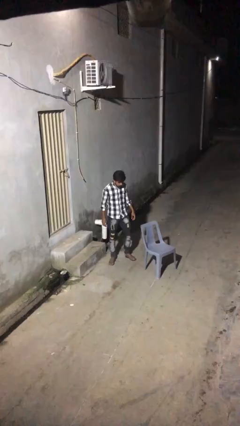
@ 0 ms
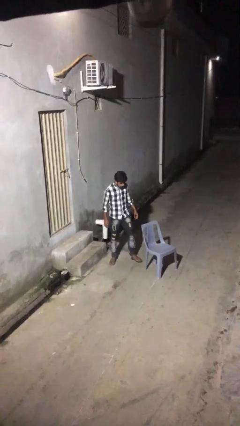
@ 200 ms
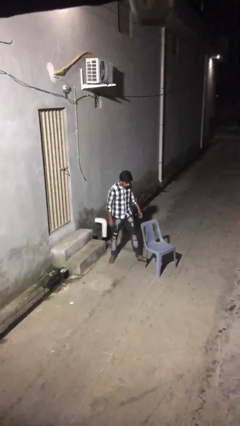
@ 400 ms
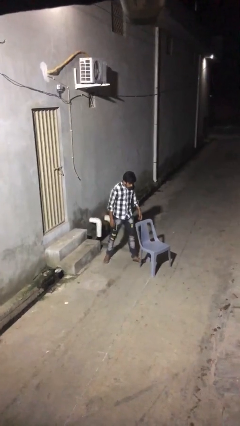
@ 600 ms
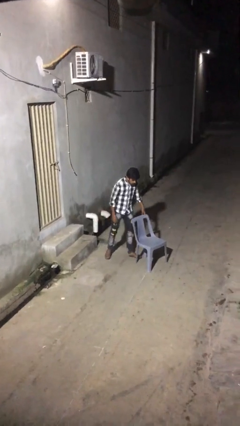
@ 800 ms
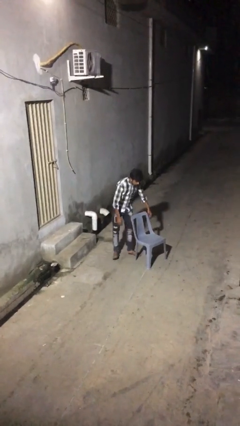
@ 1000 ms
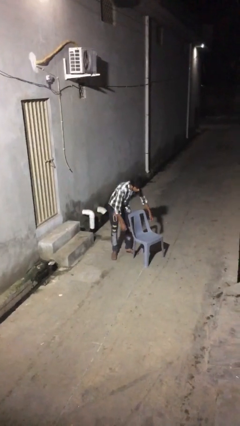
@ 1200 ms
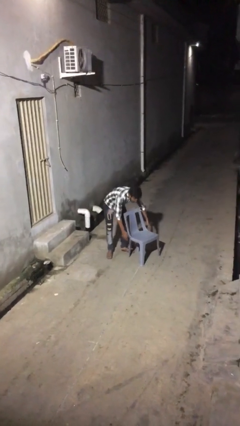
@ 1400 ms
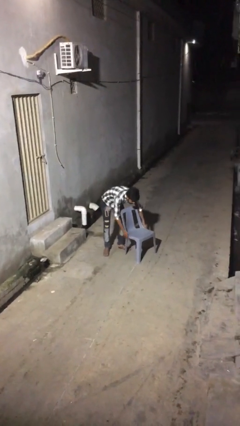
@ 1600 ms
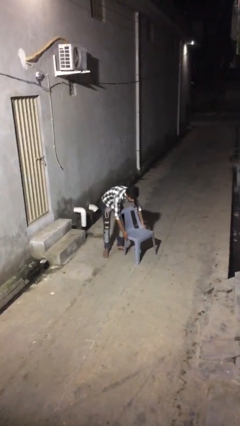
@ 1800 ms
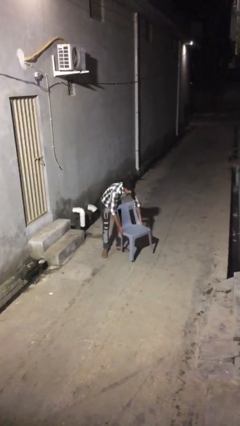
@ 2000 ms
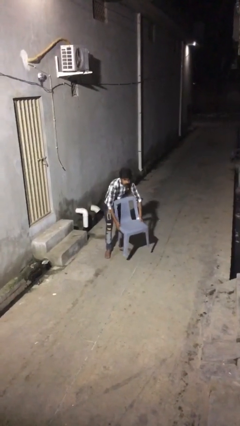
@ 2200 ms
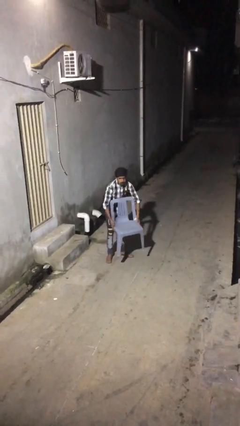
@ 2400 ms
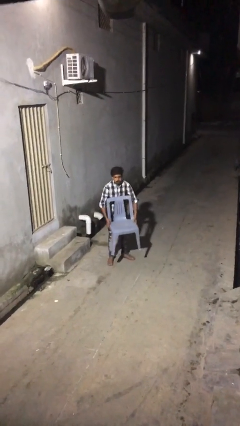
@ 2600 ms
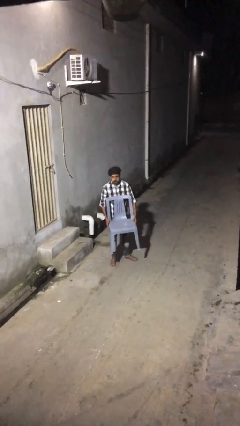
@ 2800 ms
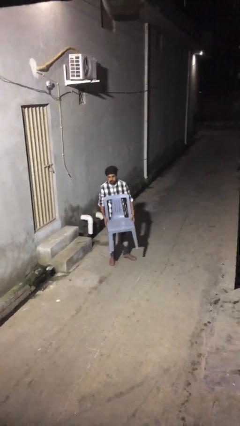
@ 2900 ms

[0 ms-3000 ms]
person picks up object from floor

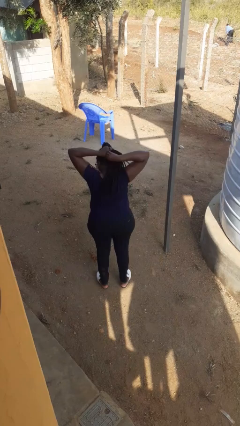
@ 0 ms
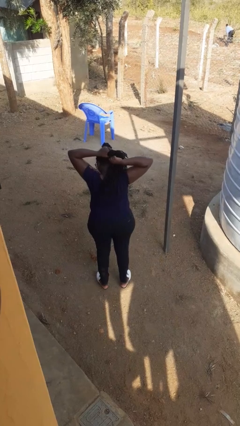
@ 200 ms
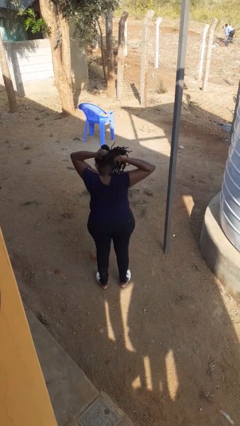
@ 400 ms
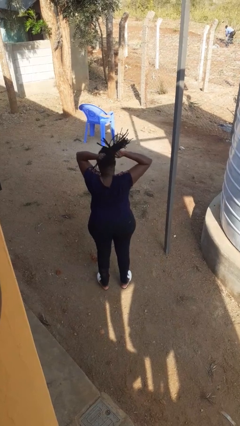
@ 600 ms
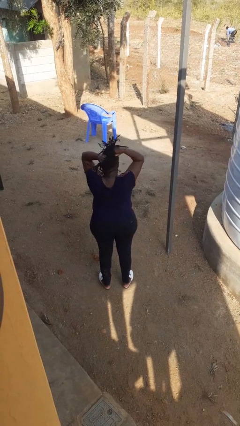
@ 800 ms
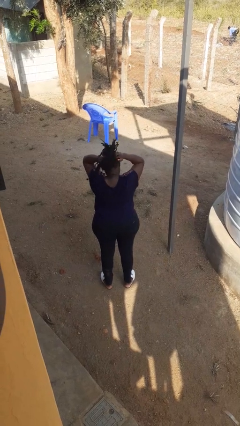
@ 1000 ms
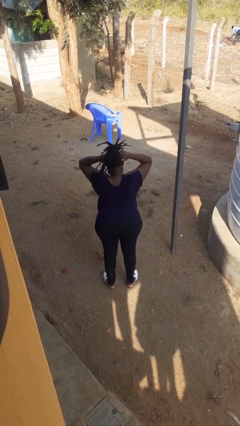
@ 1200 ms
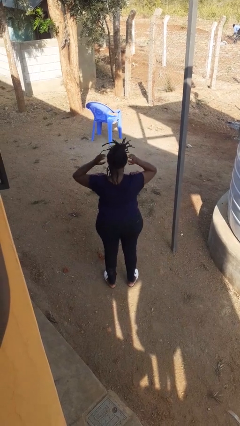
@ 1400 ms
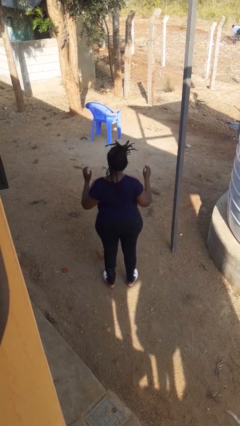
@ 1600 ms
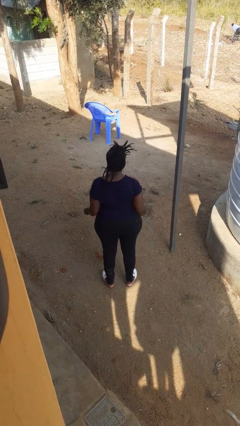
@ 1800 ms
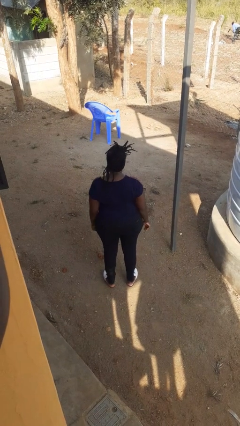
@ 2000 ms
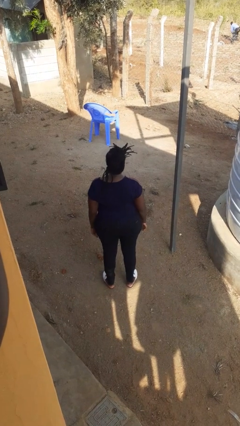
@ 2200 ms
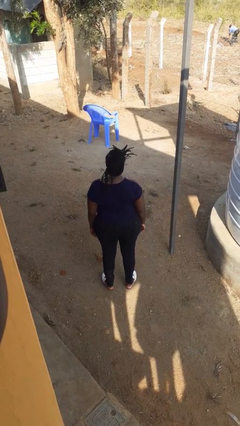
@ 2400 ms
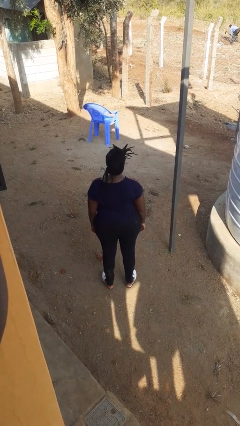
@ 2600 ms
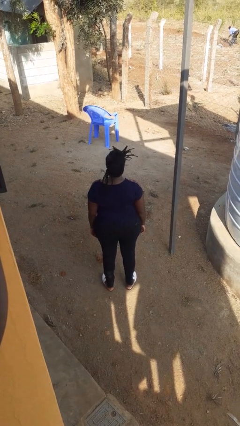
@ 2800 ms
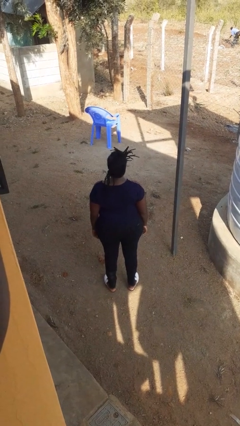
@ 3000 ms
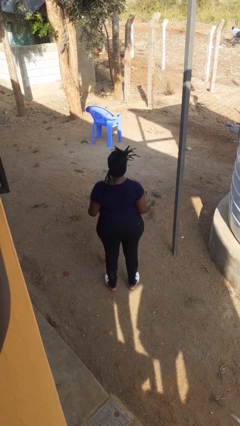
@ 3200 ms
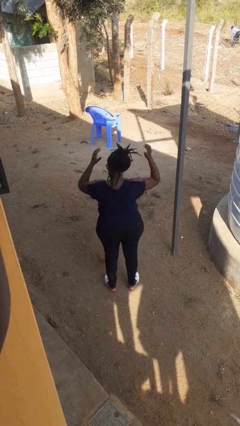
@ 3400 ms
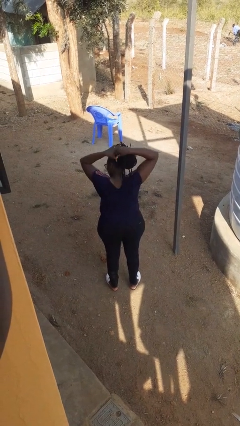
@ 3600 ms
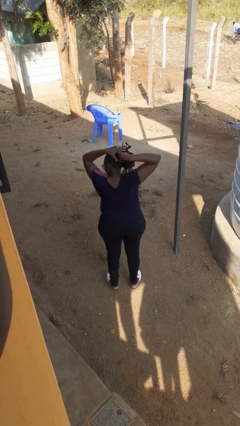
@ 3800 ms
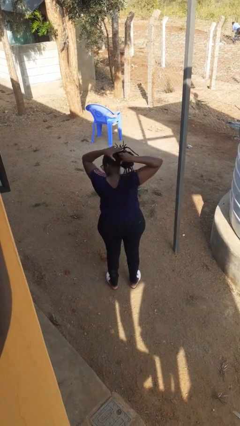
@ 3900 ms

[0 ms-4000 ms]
person puts hair in ponytail

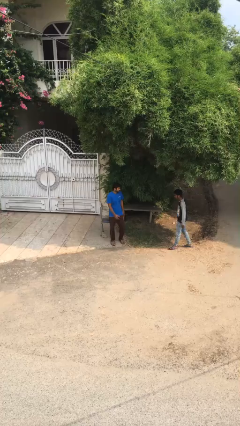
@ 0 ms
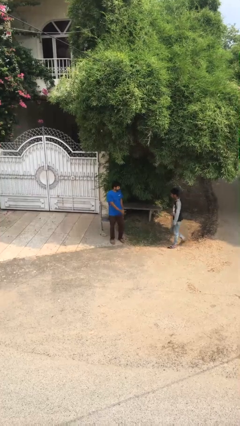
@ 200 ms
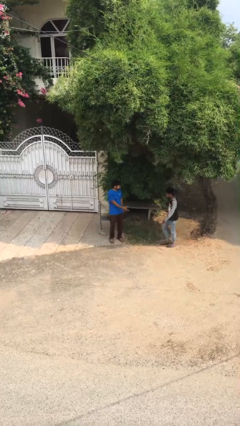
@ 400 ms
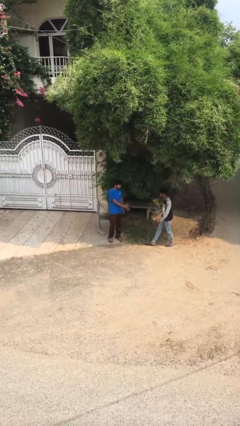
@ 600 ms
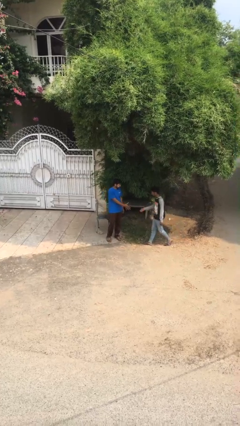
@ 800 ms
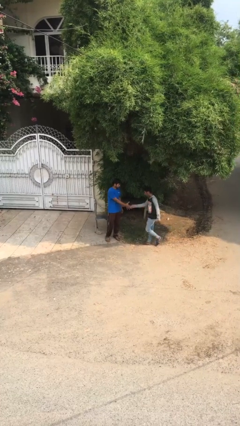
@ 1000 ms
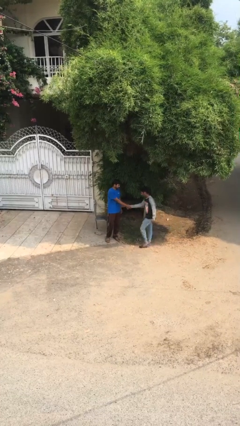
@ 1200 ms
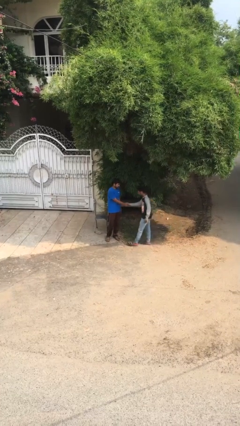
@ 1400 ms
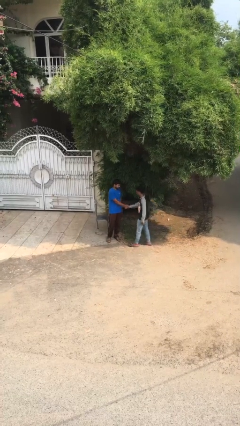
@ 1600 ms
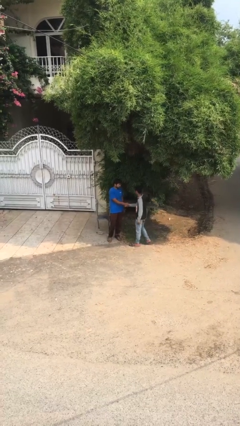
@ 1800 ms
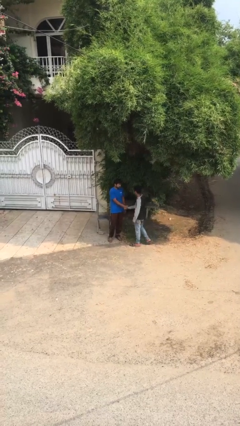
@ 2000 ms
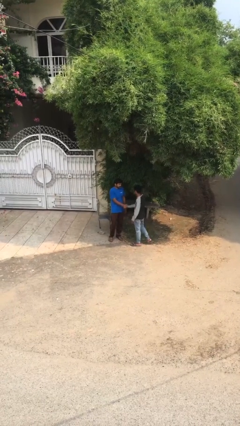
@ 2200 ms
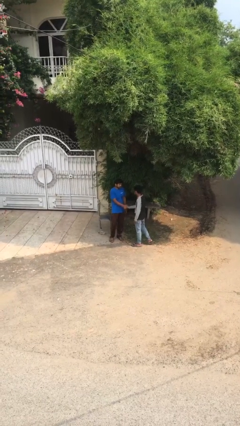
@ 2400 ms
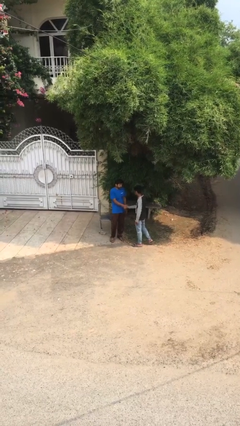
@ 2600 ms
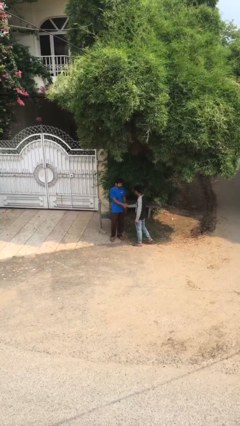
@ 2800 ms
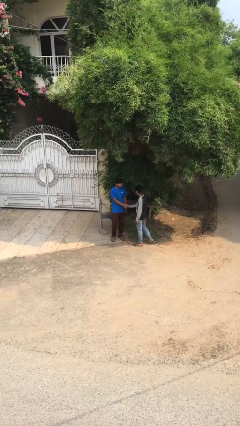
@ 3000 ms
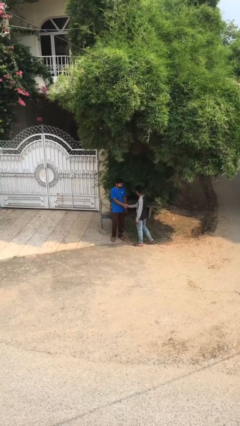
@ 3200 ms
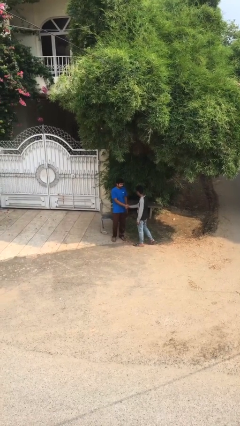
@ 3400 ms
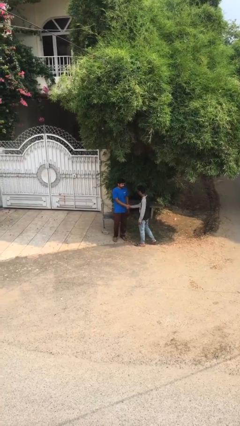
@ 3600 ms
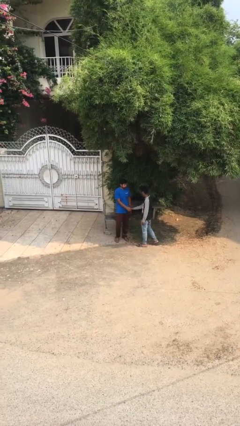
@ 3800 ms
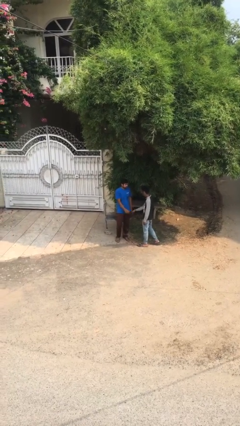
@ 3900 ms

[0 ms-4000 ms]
person shakes hand

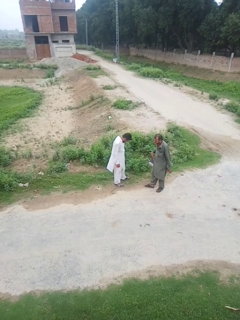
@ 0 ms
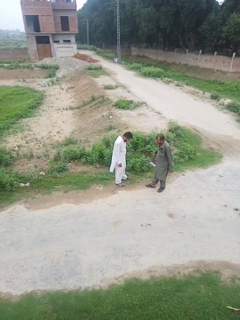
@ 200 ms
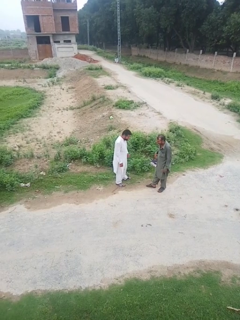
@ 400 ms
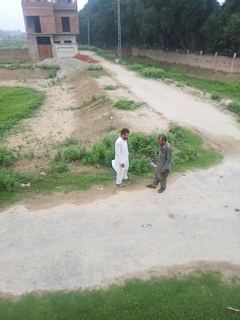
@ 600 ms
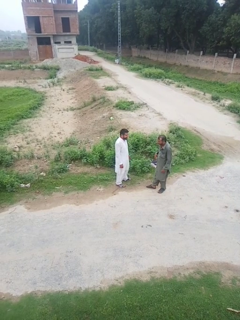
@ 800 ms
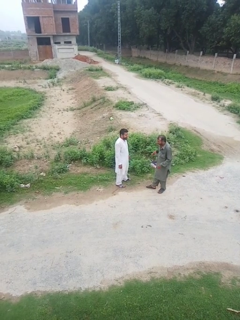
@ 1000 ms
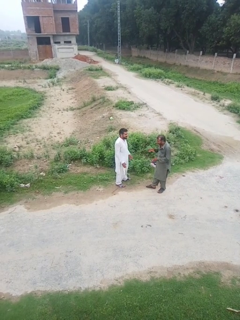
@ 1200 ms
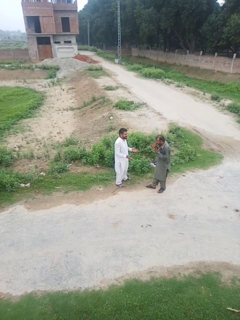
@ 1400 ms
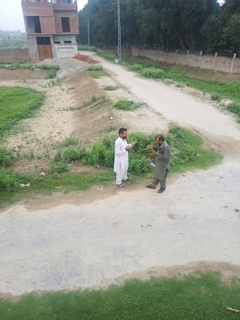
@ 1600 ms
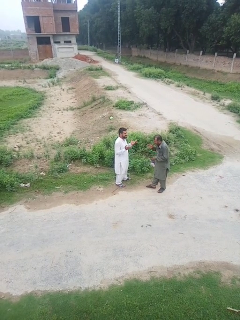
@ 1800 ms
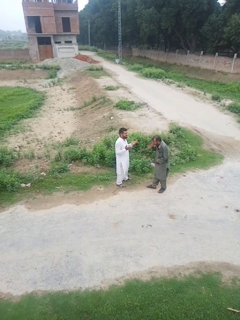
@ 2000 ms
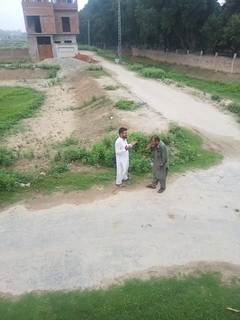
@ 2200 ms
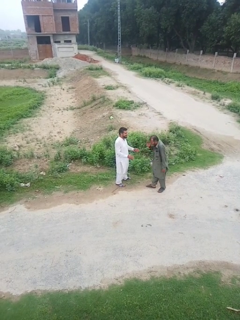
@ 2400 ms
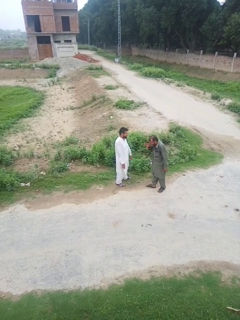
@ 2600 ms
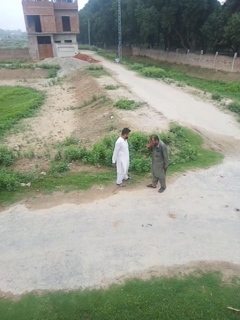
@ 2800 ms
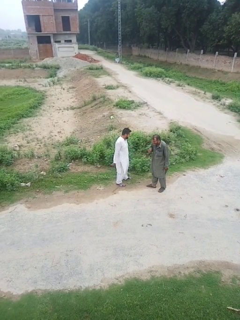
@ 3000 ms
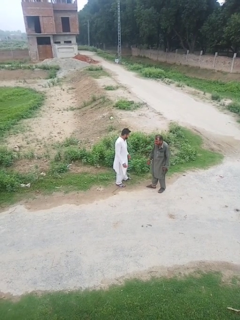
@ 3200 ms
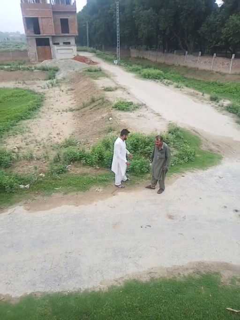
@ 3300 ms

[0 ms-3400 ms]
person laughs with person

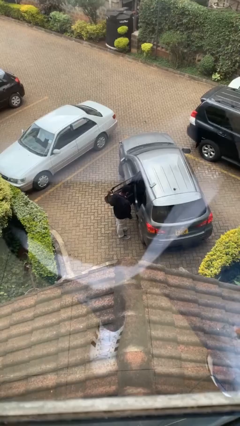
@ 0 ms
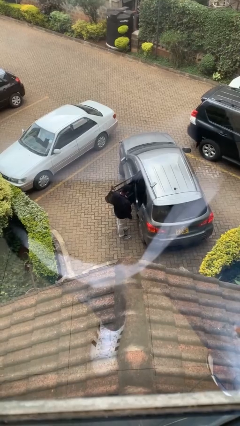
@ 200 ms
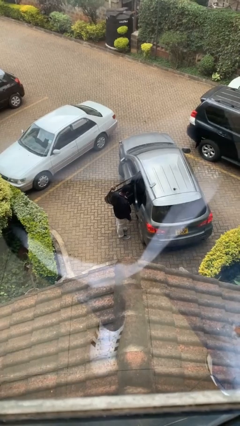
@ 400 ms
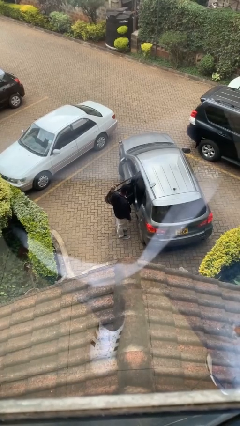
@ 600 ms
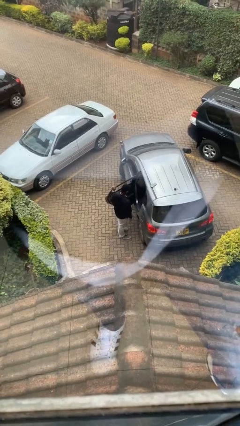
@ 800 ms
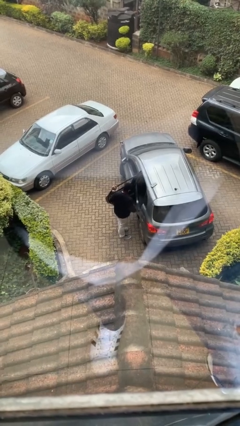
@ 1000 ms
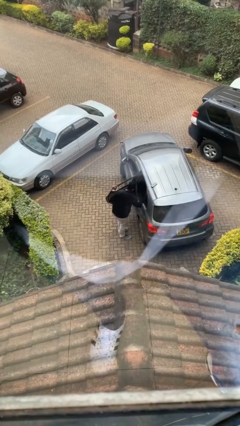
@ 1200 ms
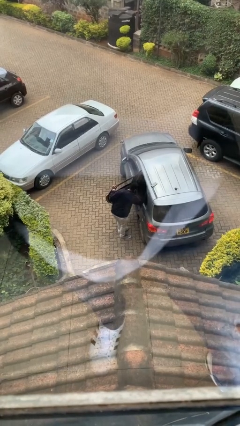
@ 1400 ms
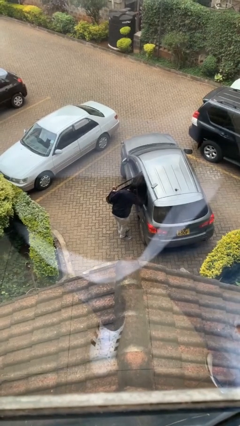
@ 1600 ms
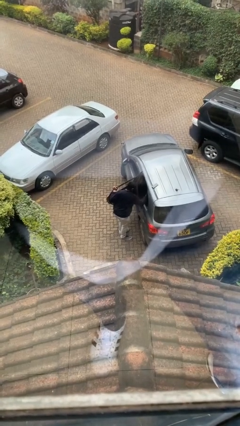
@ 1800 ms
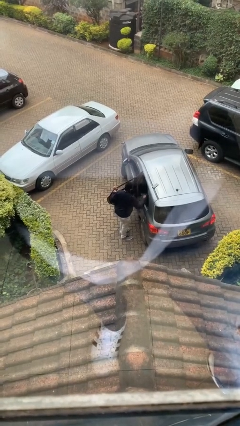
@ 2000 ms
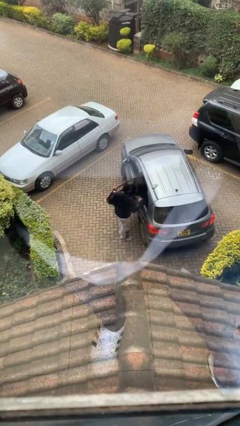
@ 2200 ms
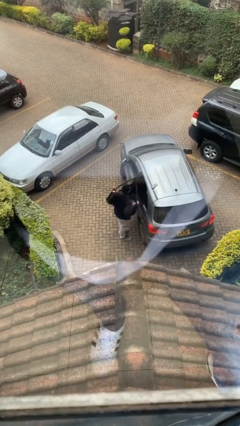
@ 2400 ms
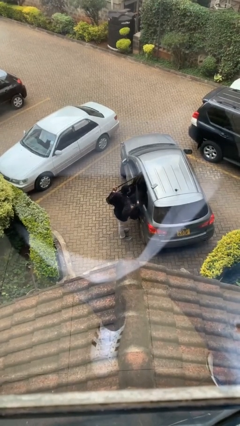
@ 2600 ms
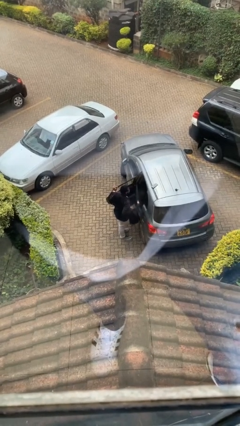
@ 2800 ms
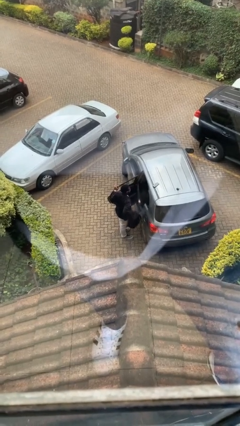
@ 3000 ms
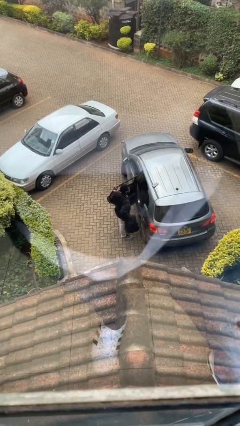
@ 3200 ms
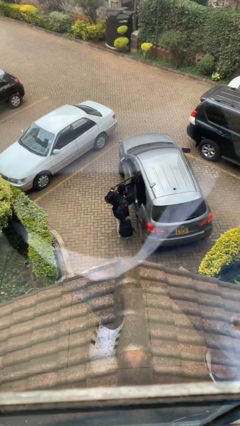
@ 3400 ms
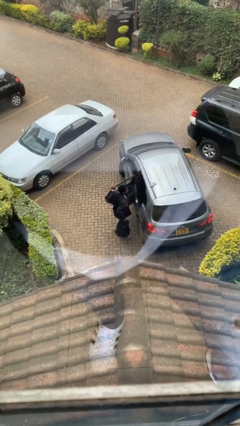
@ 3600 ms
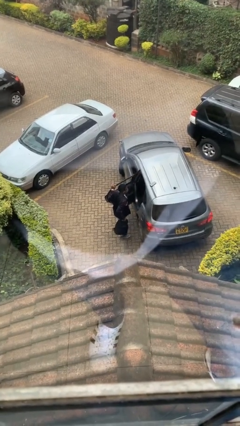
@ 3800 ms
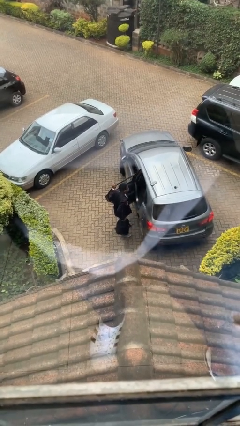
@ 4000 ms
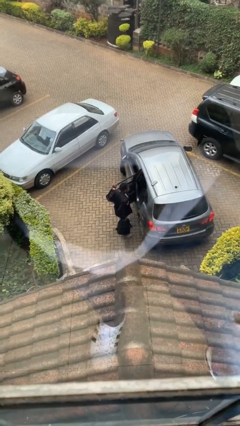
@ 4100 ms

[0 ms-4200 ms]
person unloads car
